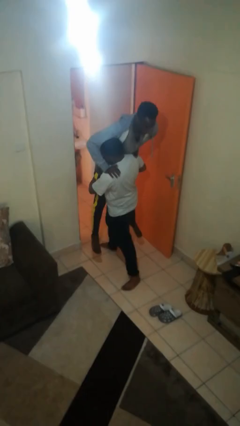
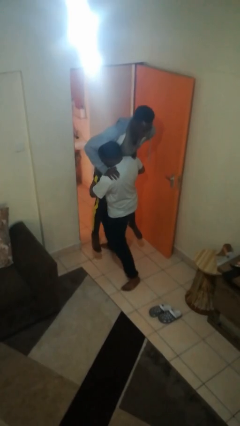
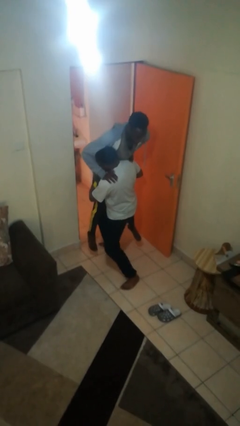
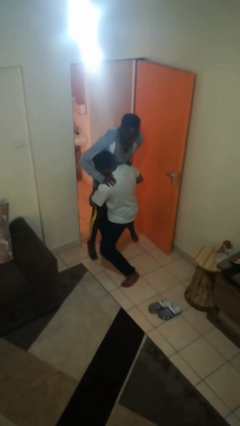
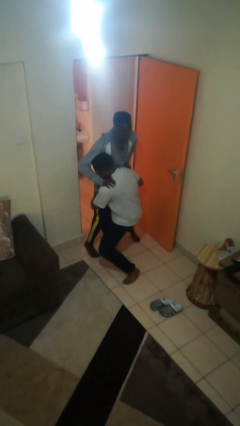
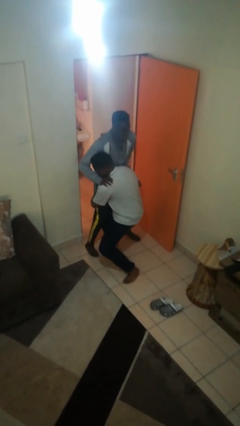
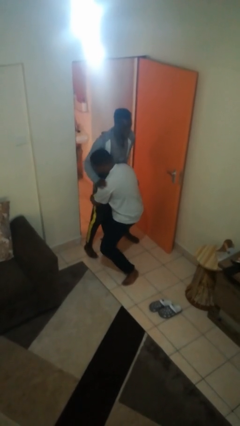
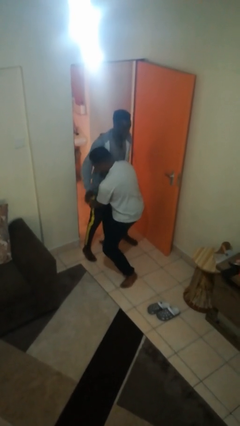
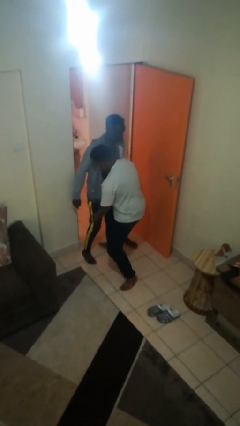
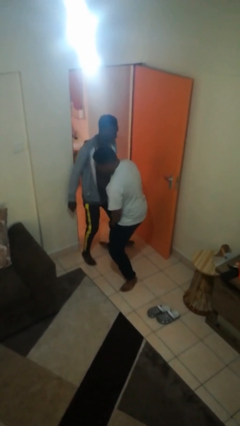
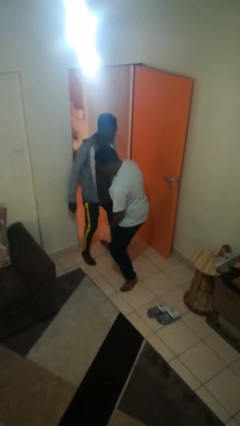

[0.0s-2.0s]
person puts down person

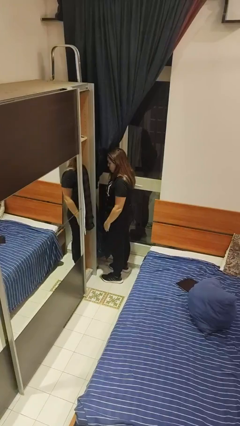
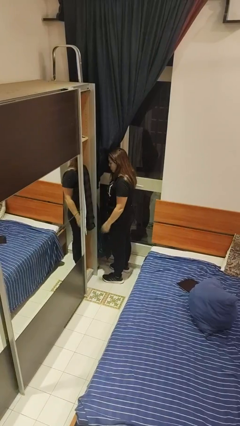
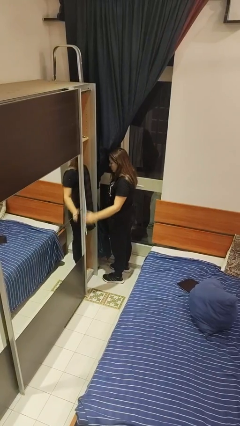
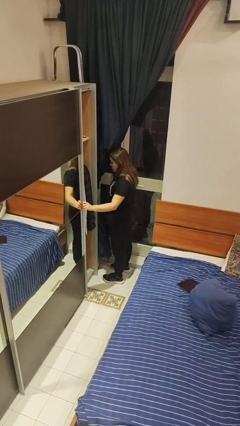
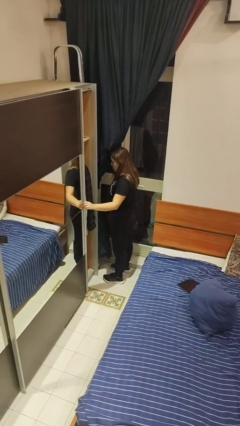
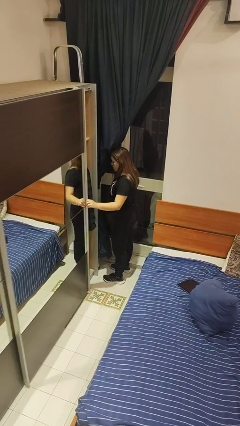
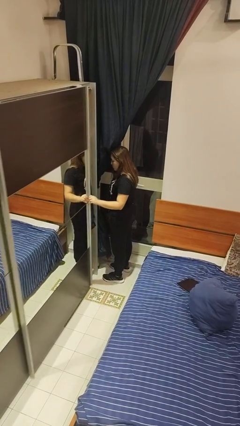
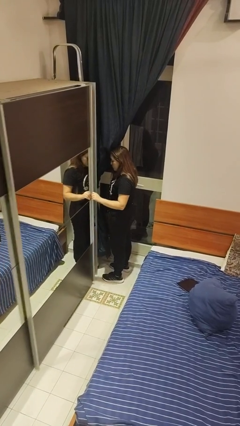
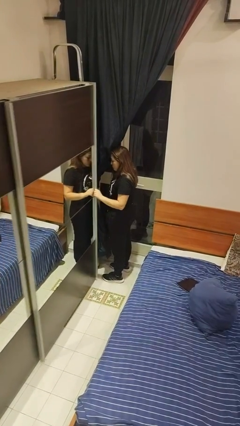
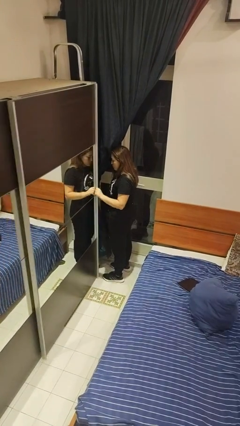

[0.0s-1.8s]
person closes closet door

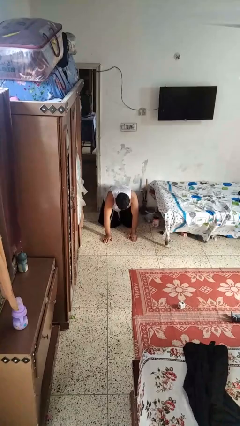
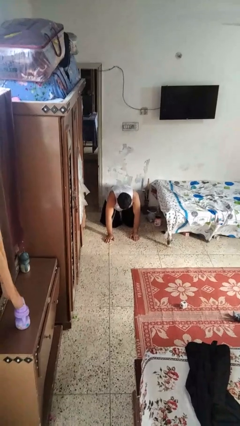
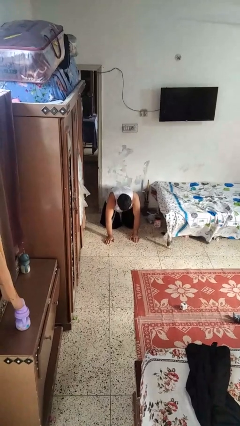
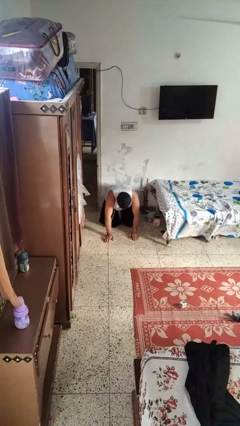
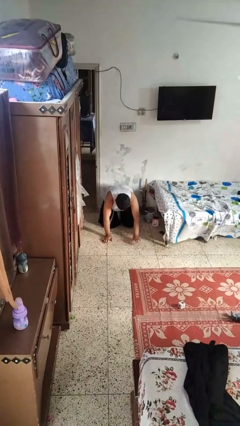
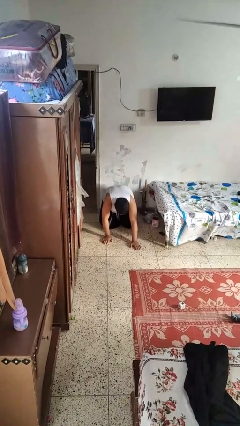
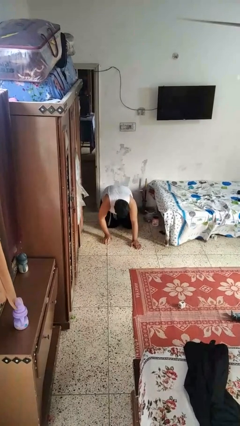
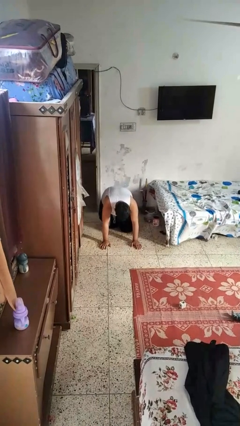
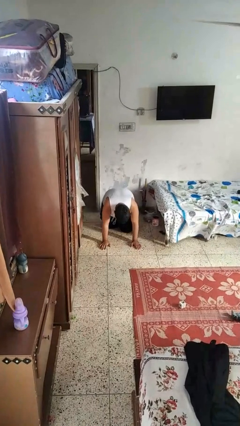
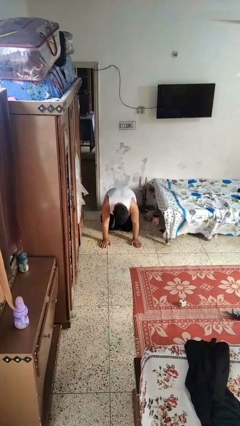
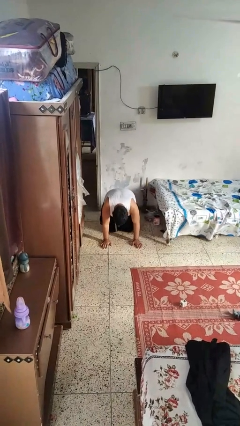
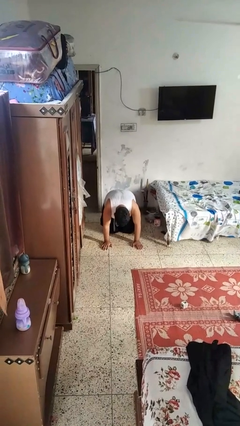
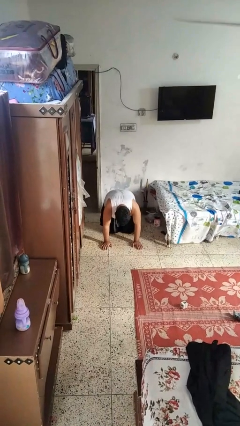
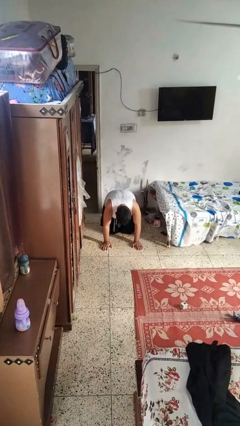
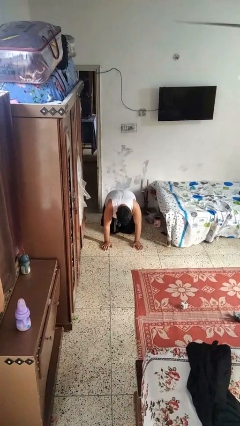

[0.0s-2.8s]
person crawls

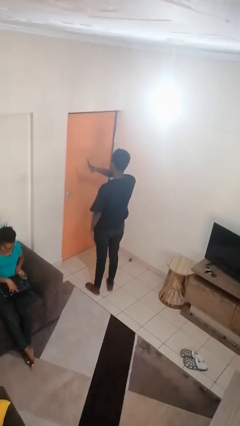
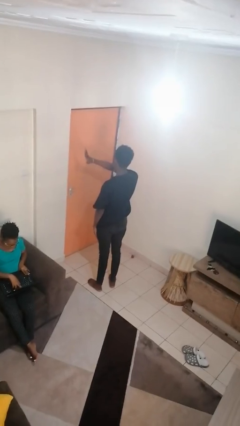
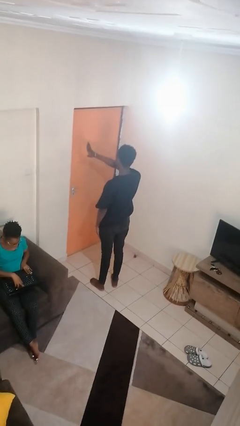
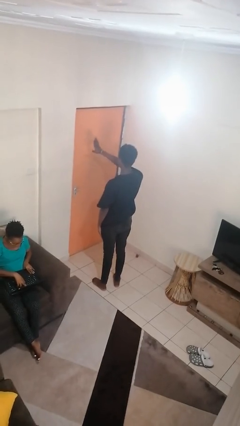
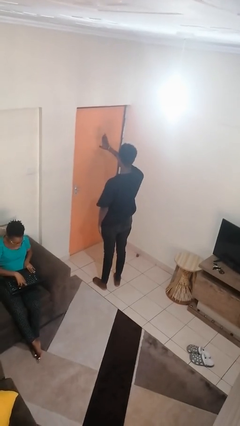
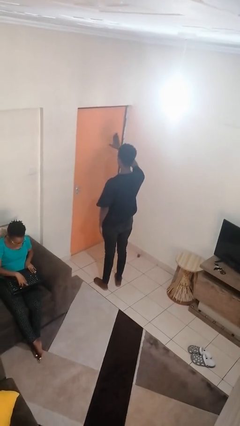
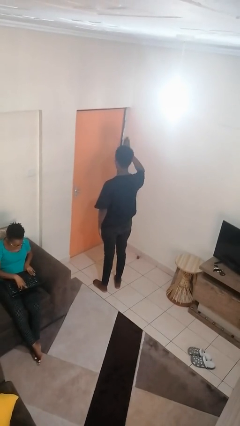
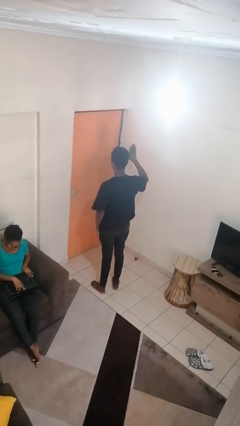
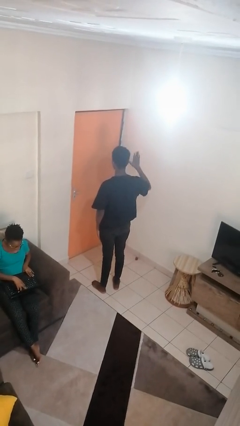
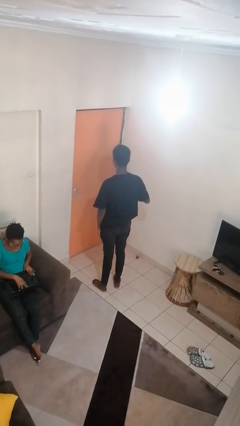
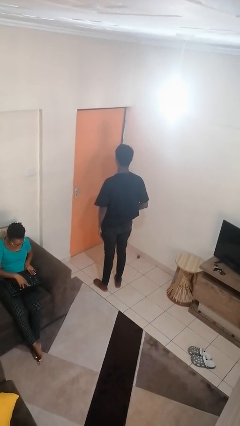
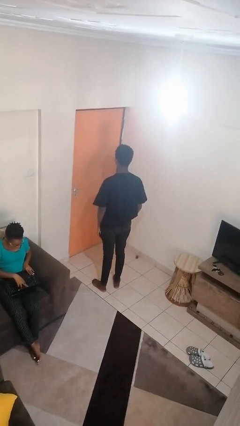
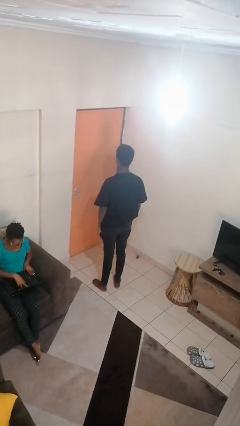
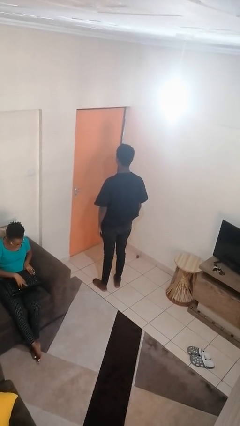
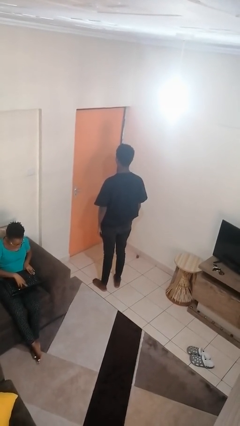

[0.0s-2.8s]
person gestures swipe right

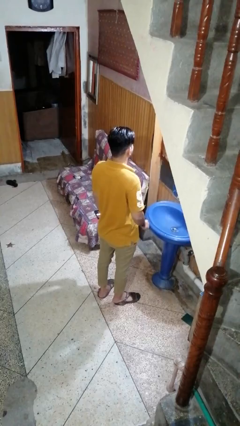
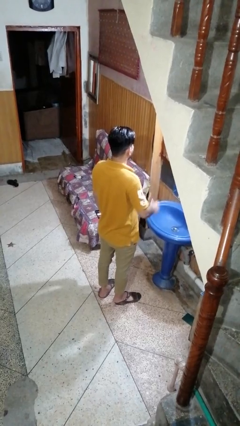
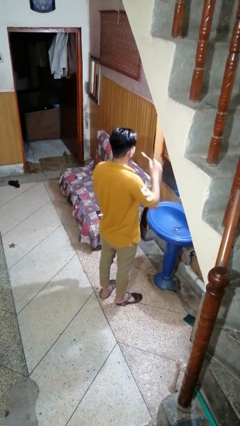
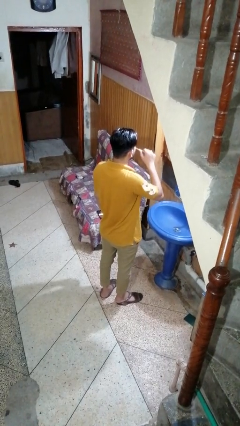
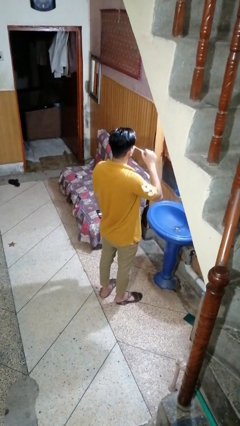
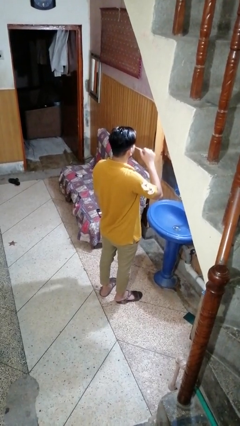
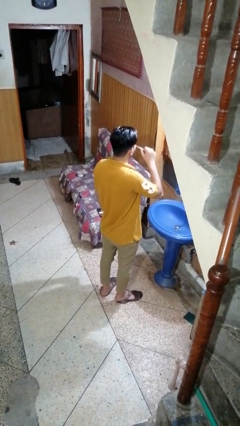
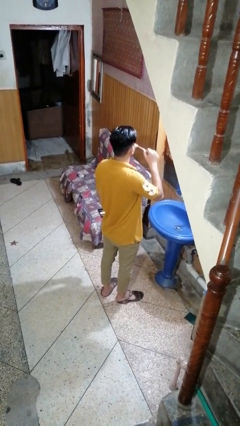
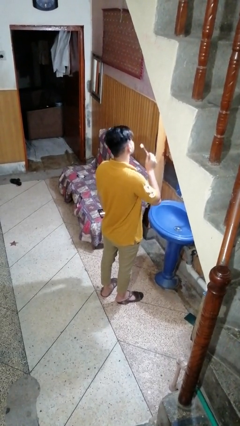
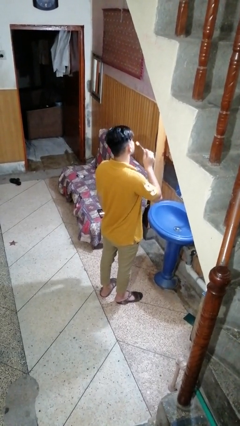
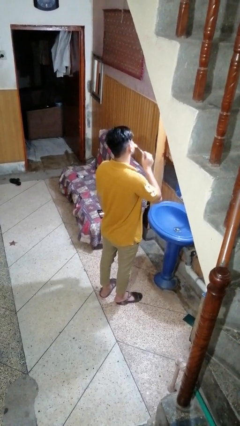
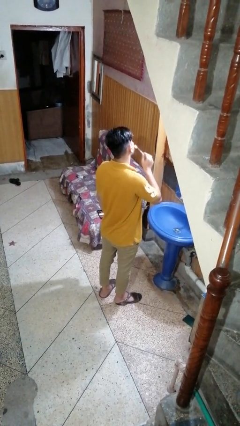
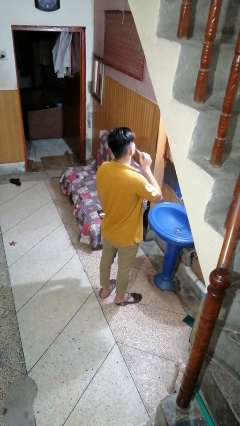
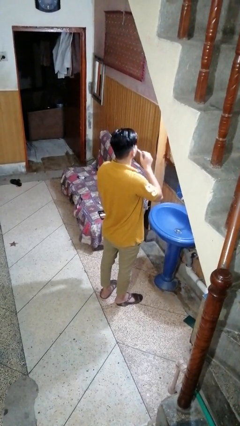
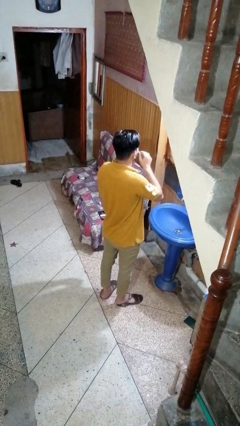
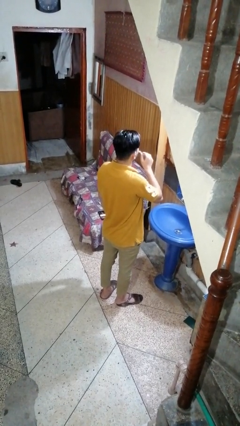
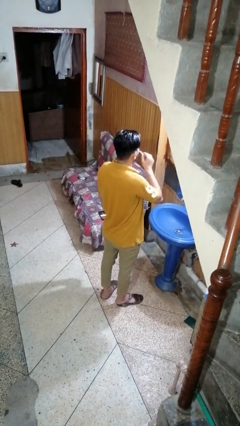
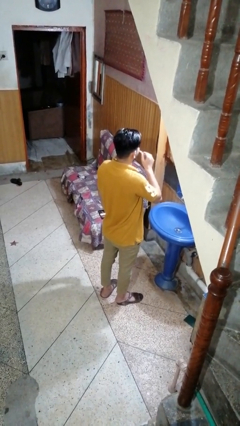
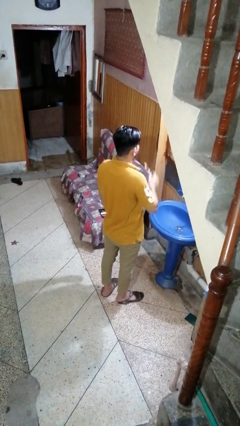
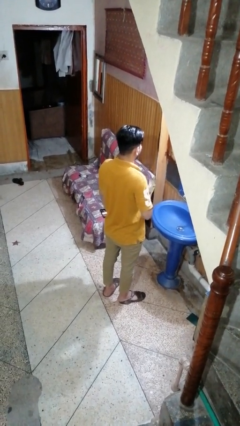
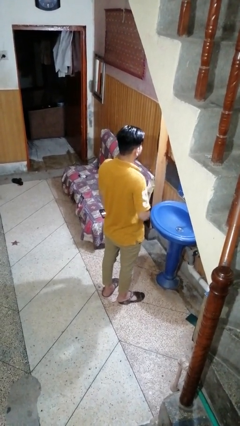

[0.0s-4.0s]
person brushes teeth

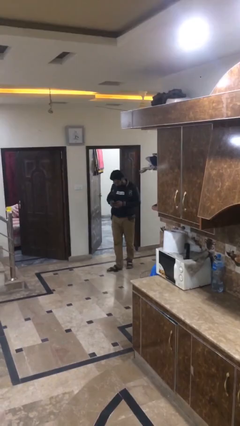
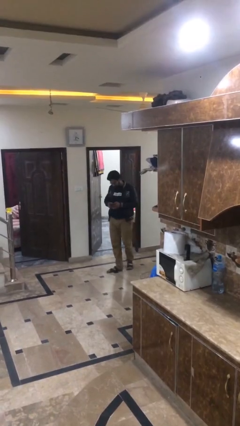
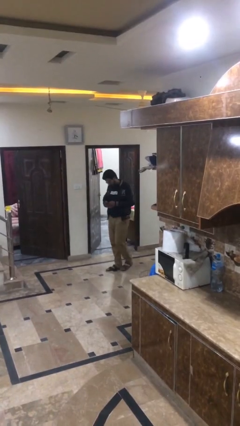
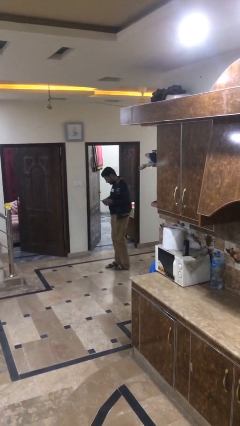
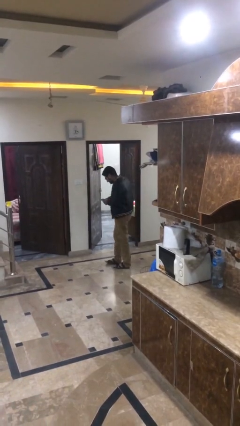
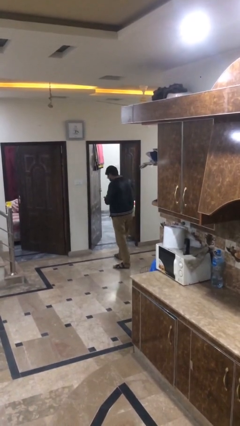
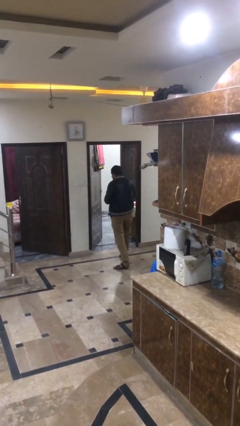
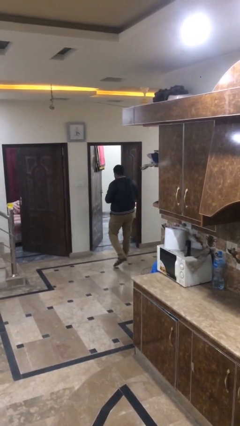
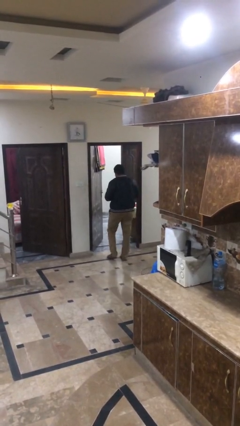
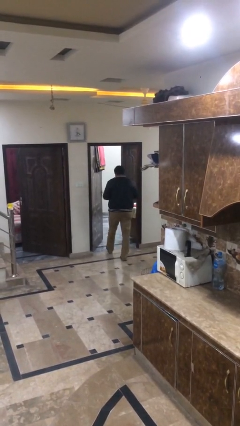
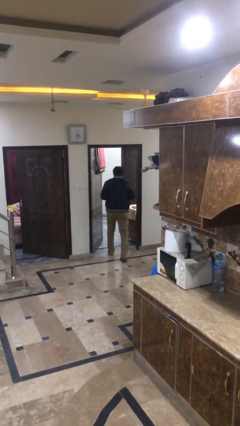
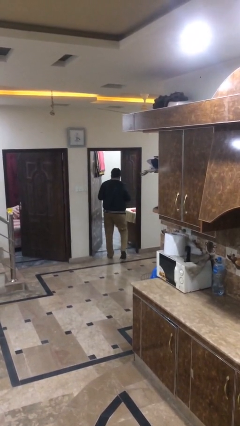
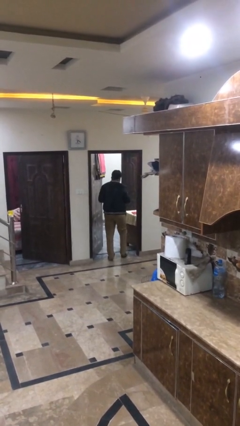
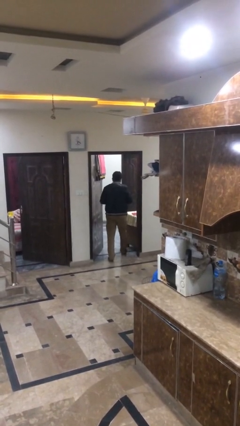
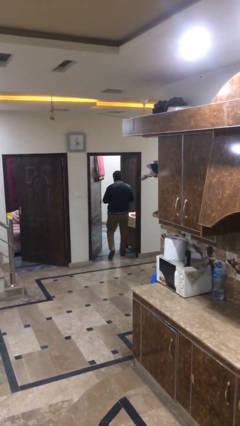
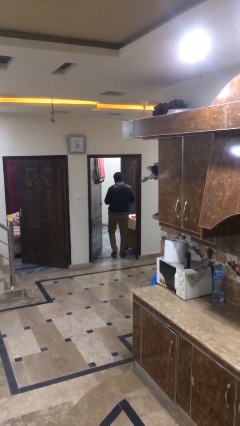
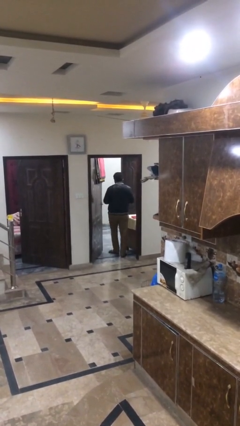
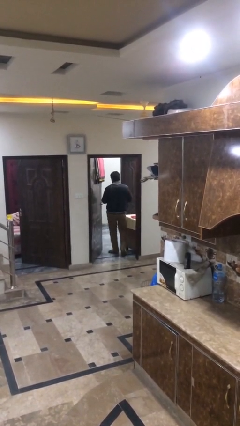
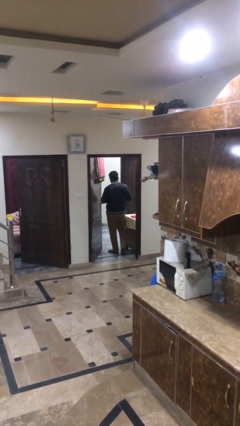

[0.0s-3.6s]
person enters scene through structure
